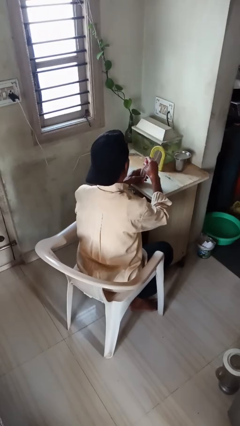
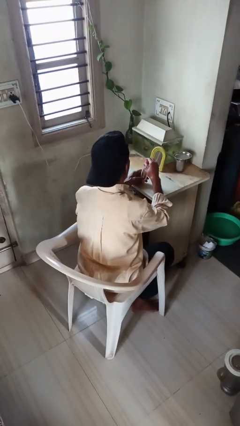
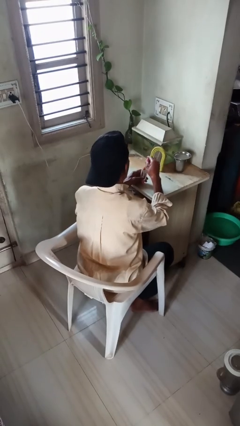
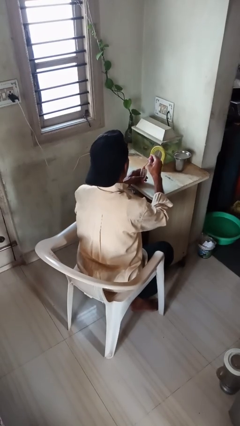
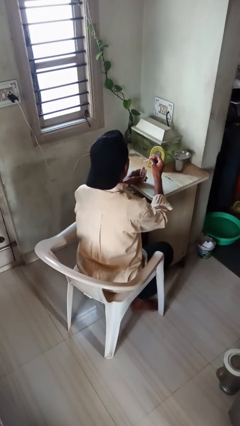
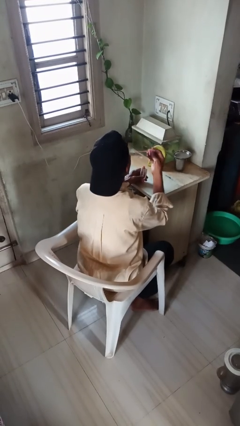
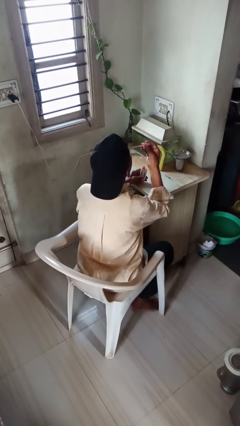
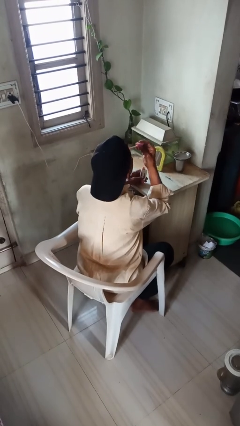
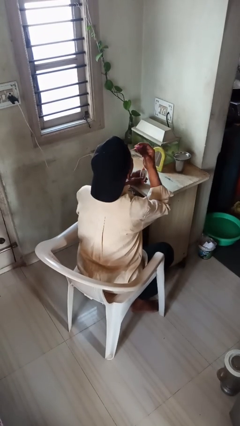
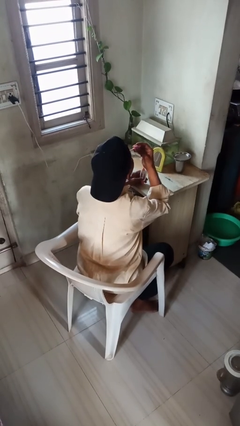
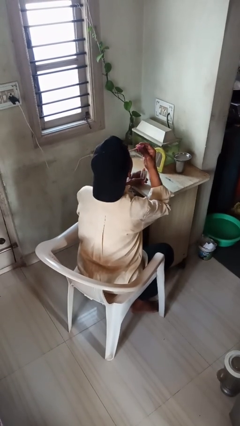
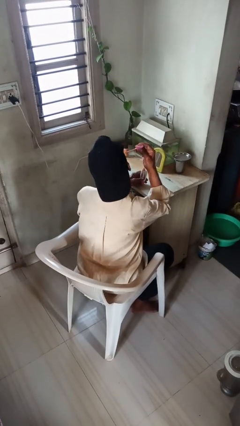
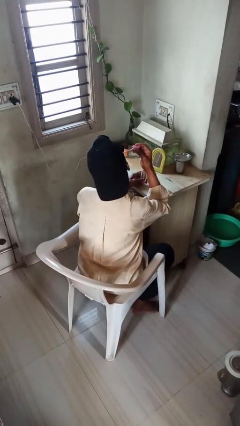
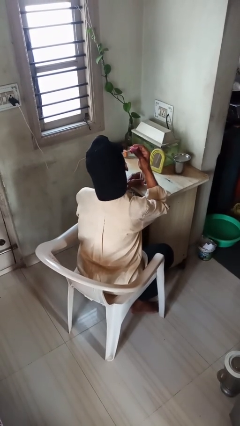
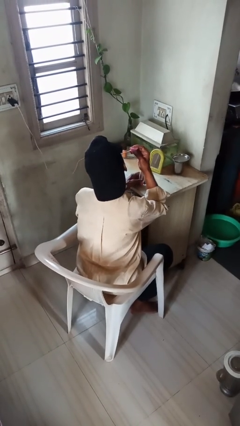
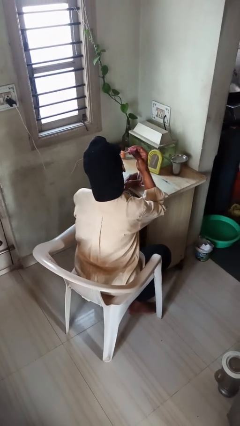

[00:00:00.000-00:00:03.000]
person applies lip makeup

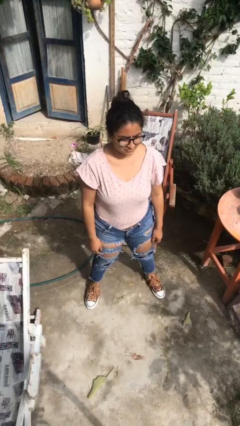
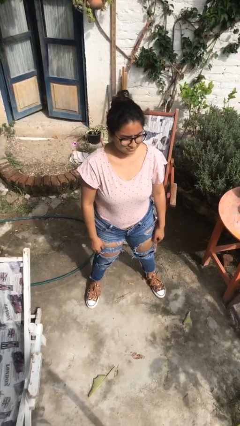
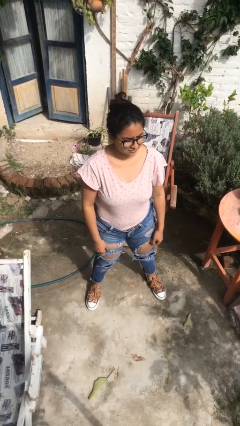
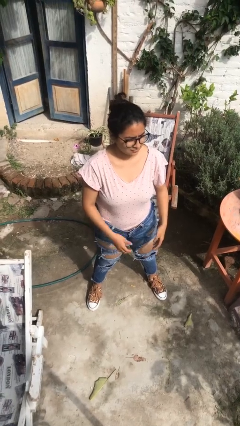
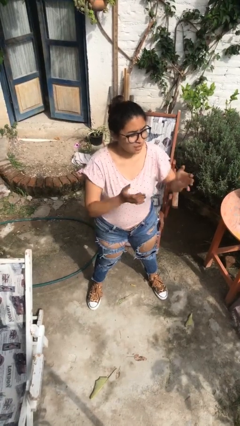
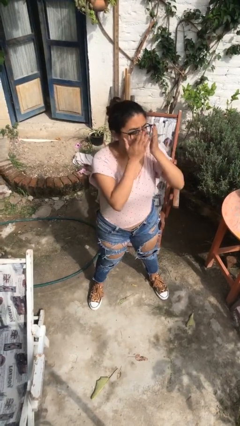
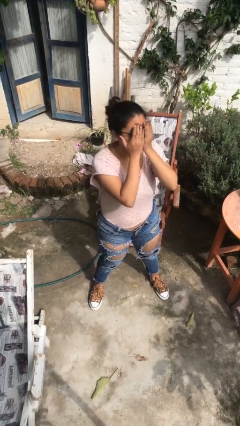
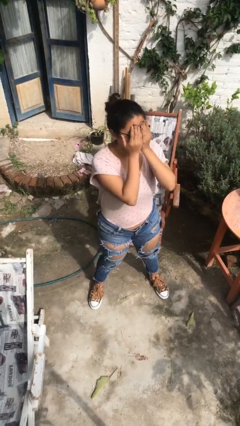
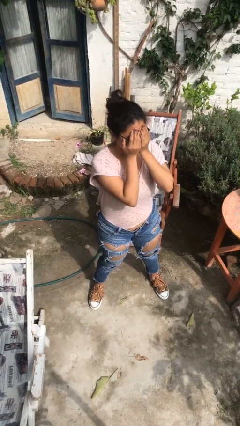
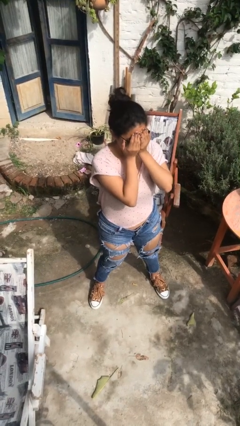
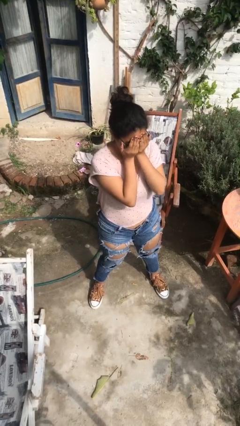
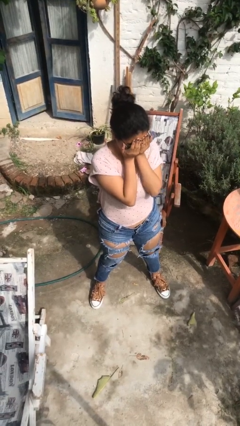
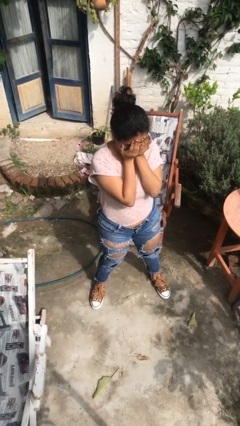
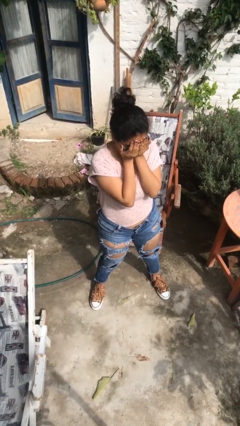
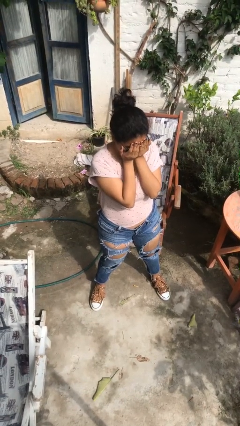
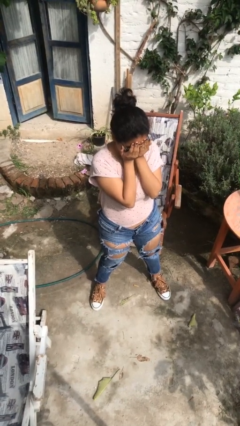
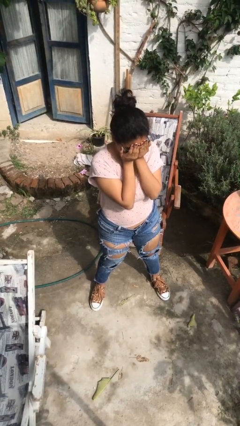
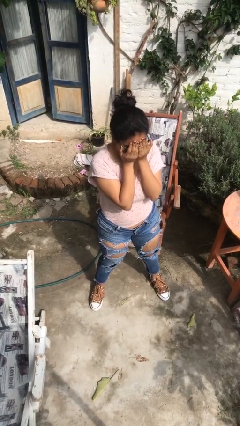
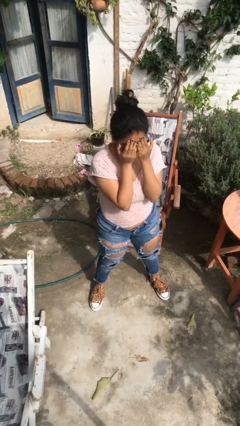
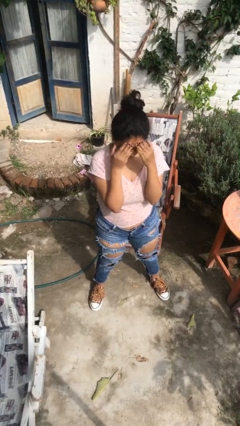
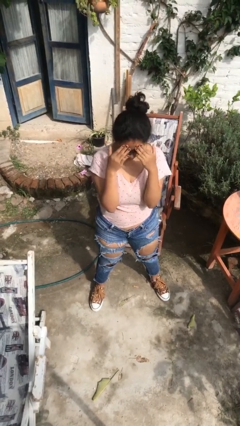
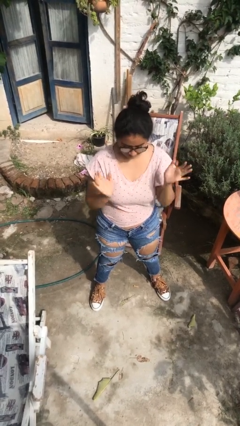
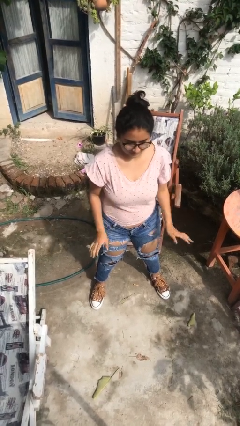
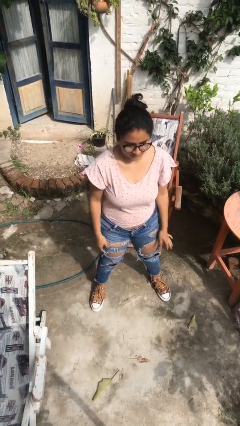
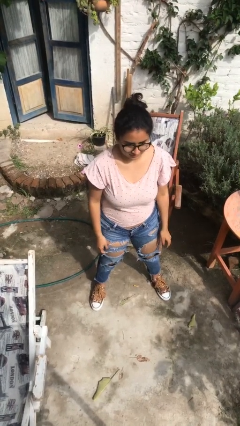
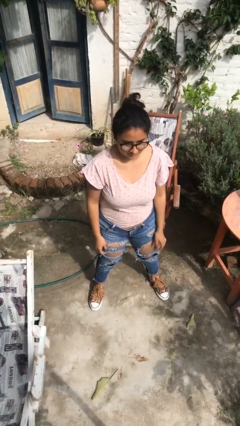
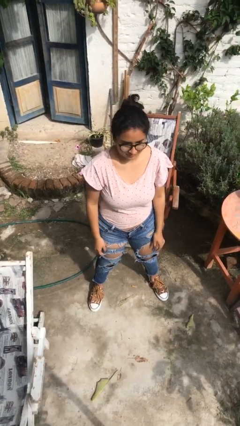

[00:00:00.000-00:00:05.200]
person covers face with hands

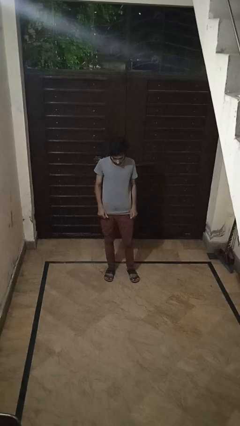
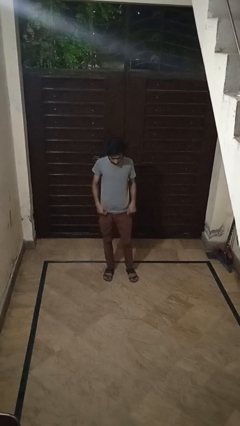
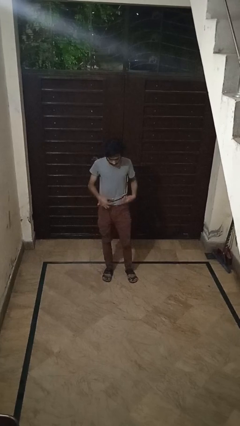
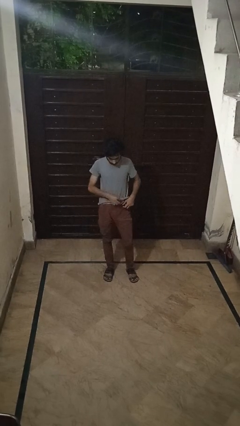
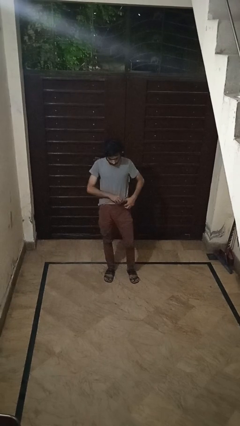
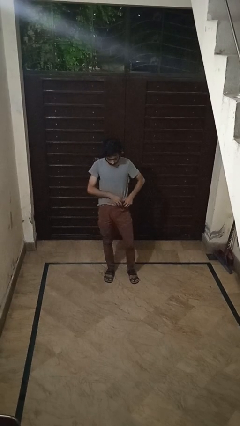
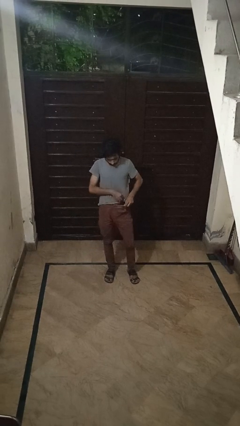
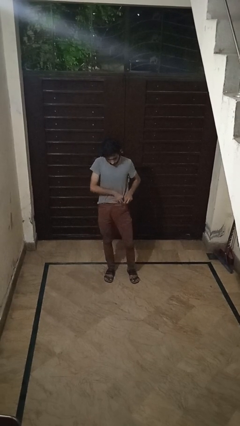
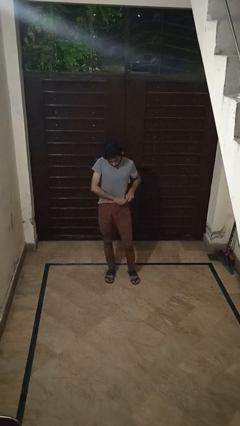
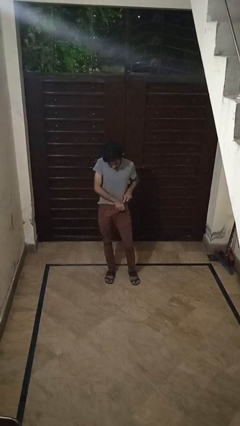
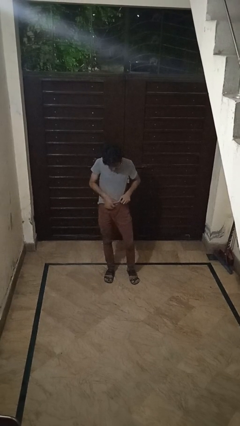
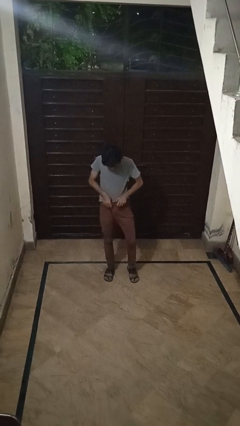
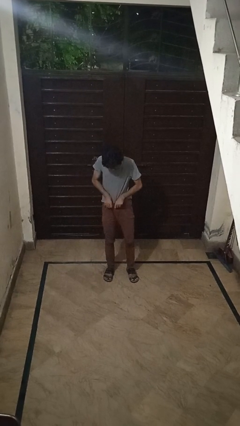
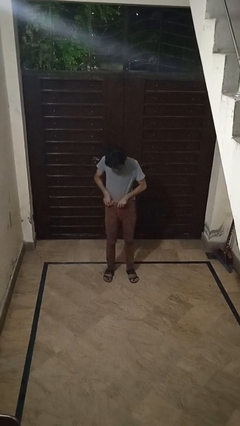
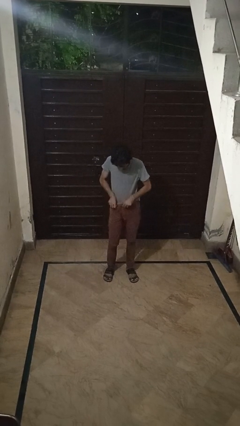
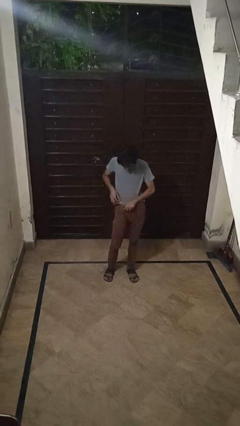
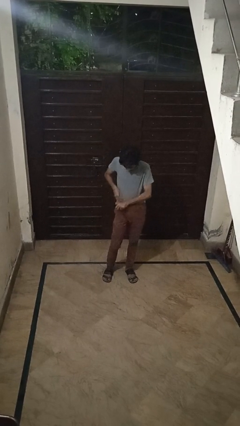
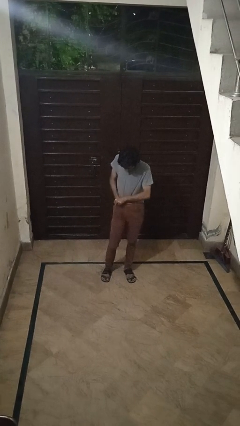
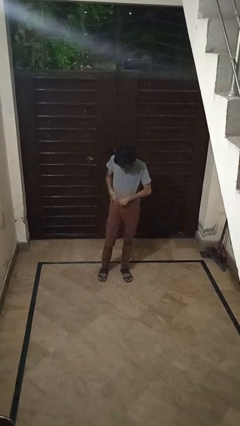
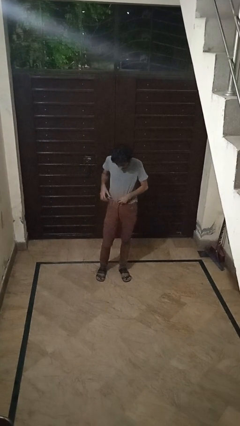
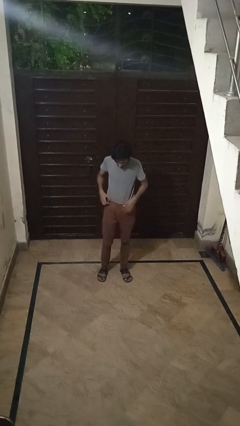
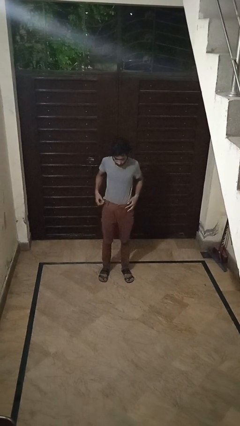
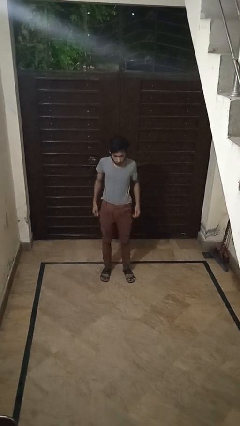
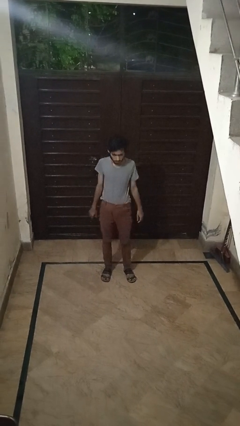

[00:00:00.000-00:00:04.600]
person tucks in shirt

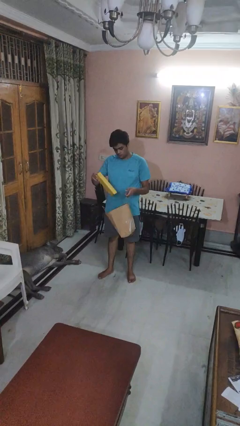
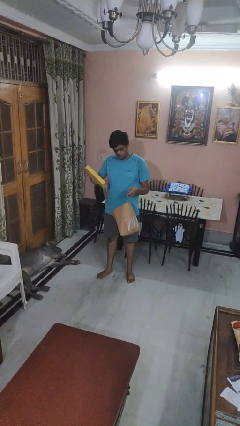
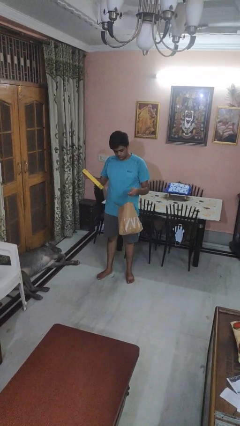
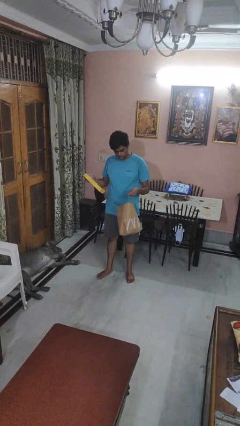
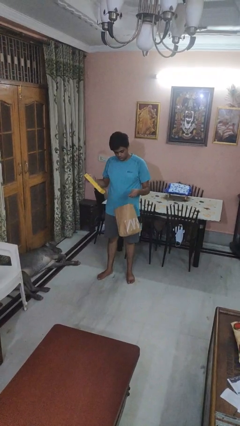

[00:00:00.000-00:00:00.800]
person takes object from bag

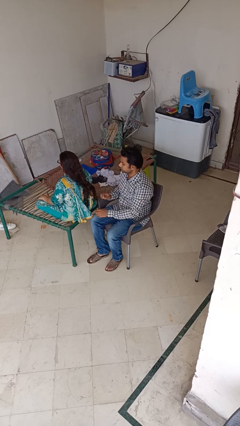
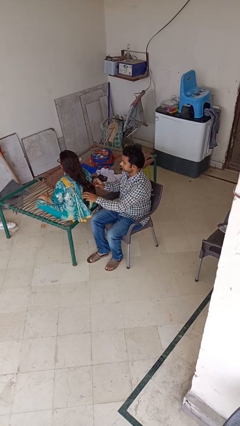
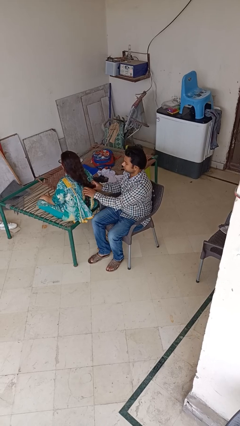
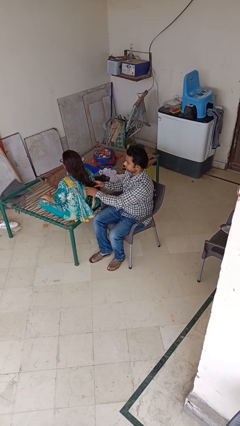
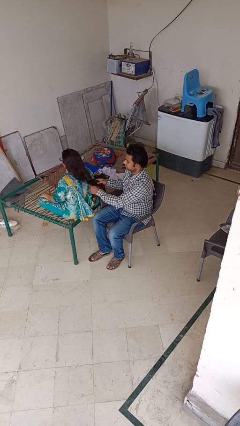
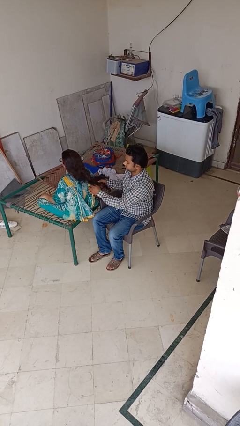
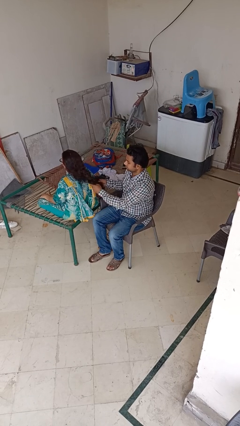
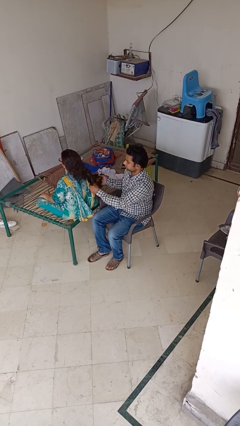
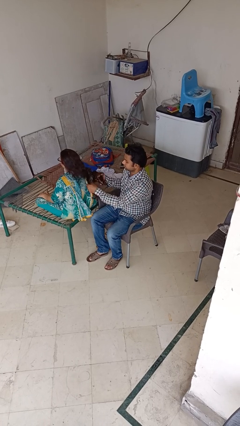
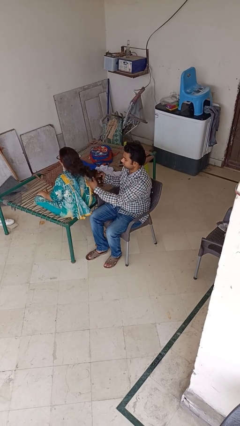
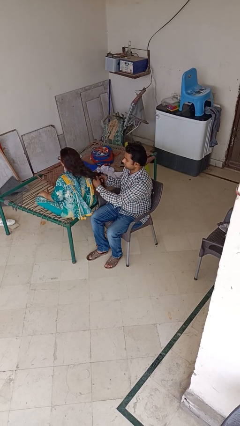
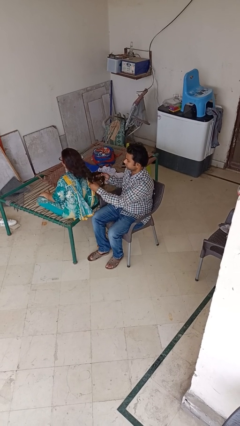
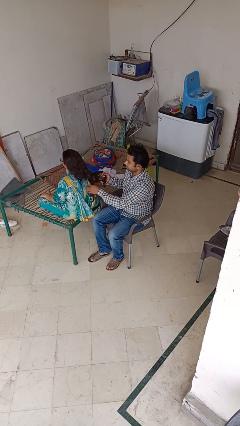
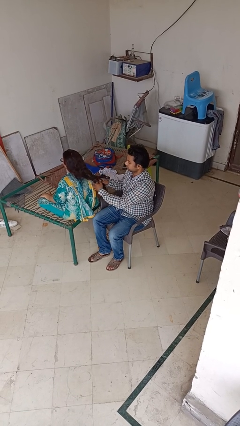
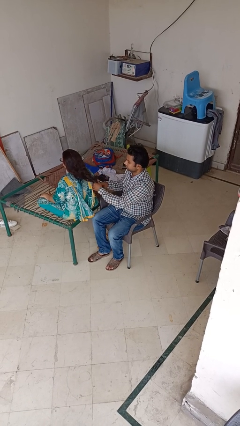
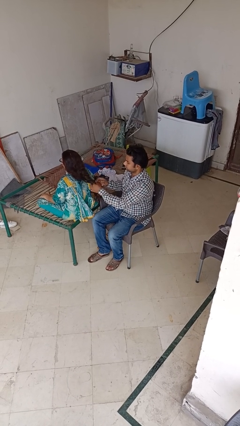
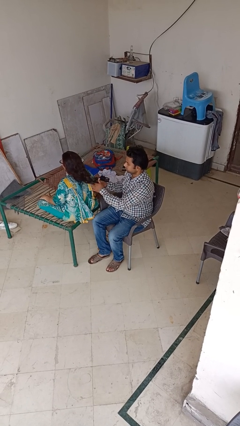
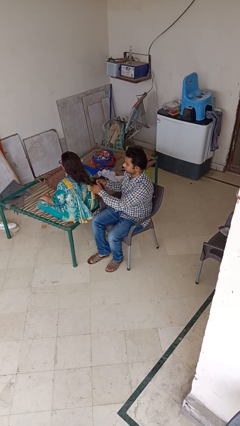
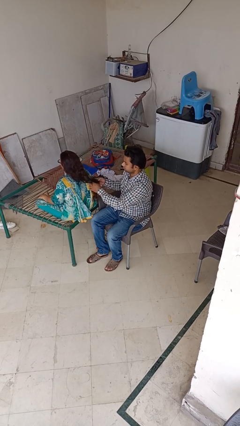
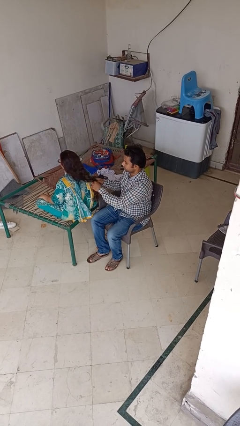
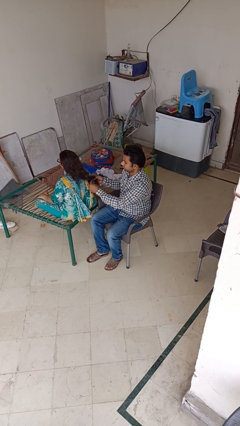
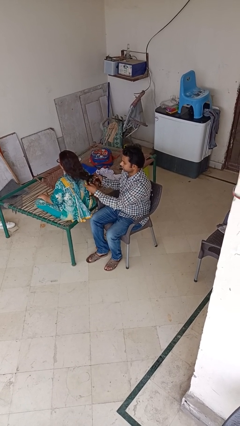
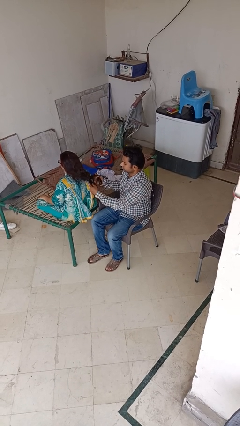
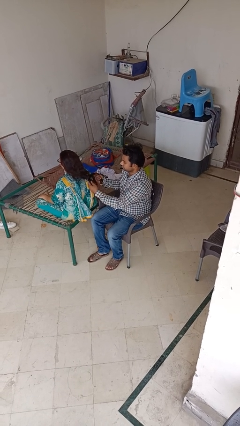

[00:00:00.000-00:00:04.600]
person braids hair of person
